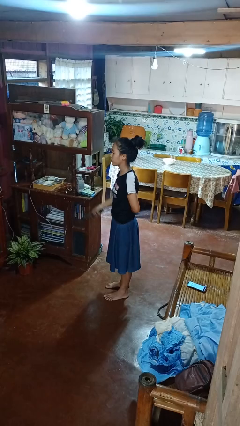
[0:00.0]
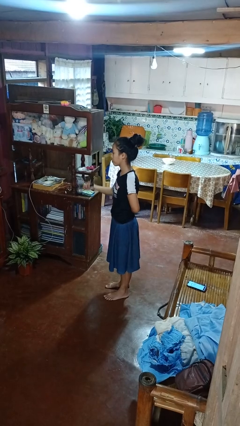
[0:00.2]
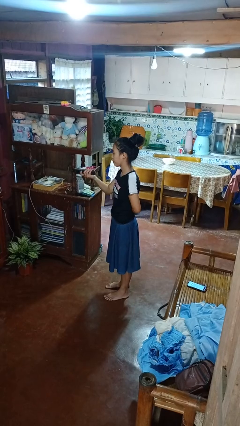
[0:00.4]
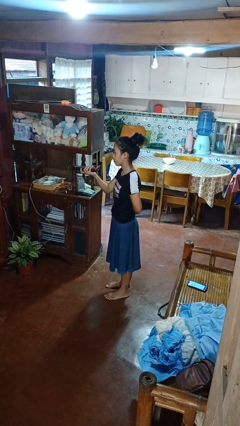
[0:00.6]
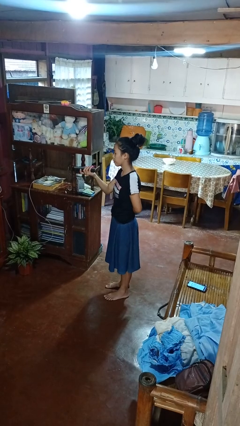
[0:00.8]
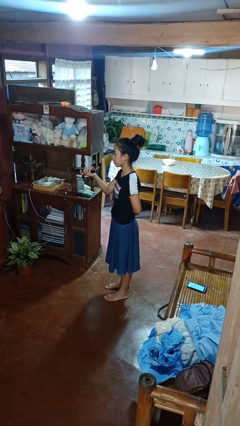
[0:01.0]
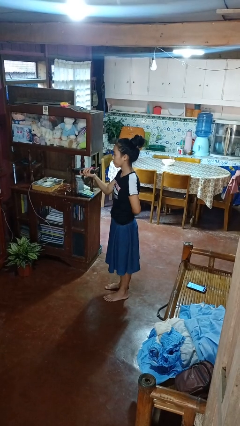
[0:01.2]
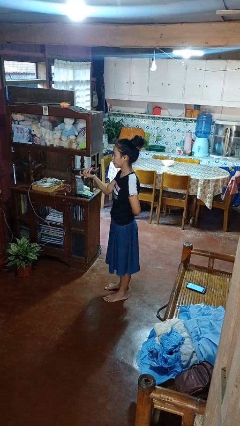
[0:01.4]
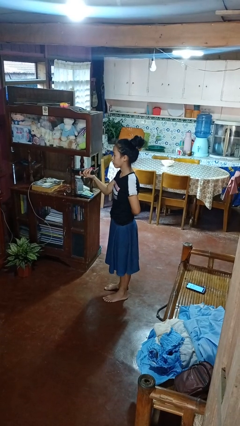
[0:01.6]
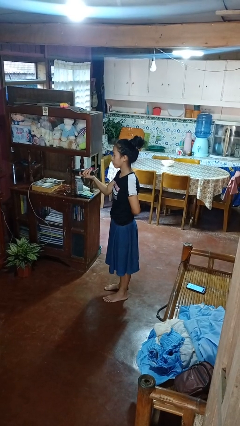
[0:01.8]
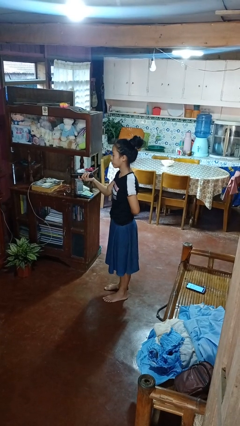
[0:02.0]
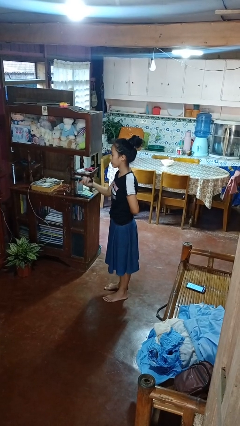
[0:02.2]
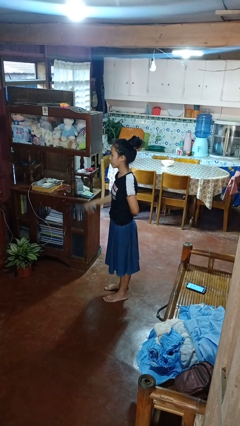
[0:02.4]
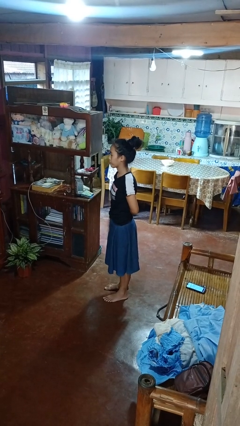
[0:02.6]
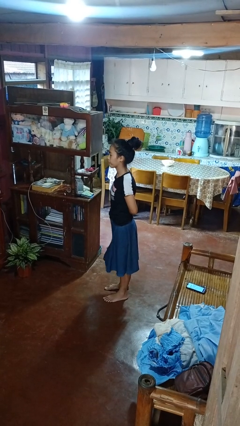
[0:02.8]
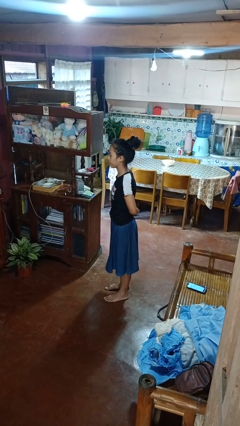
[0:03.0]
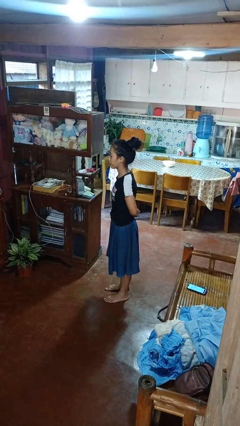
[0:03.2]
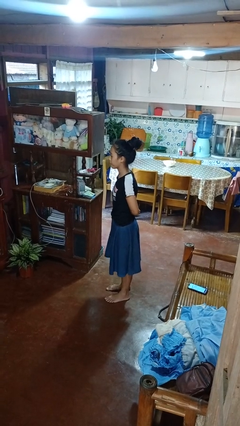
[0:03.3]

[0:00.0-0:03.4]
person uses television remote

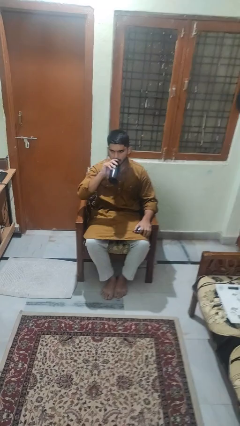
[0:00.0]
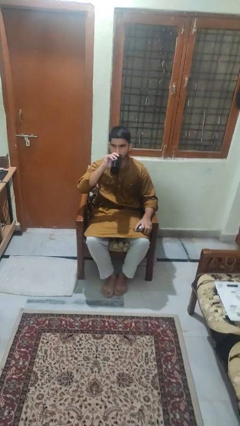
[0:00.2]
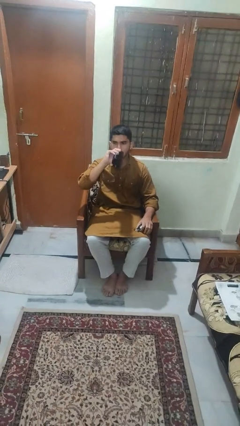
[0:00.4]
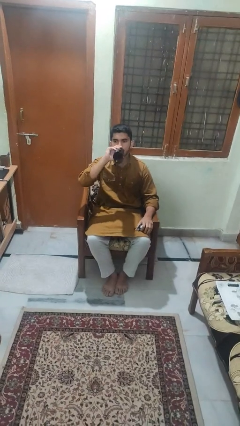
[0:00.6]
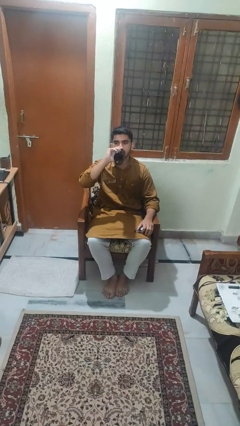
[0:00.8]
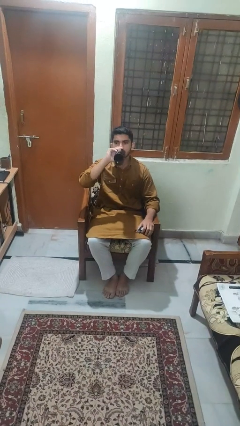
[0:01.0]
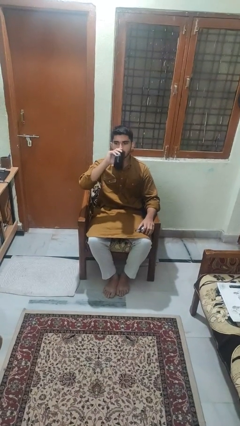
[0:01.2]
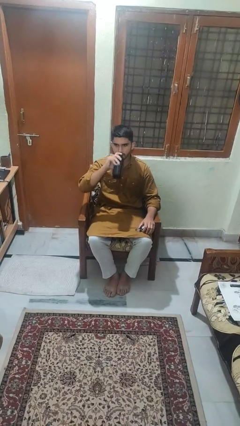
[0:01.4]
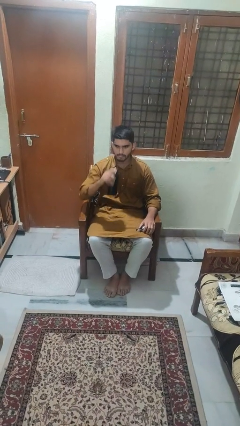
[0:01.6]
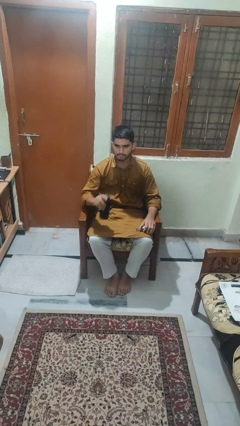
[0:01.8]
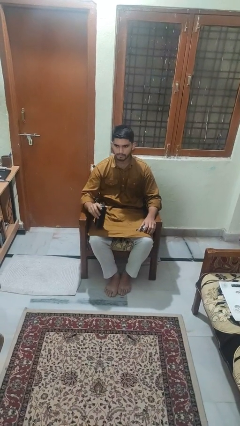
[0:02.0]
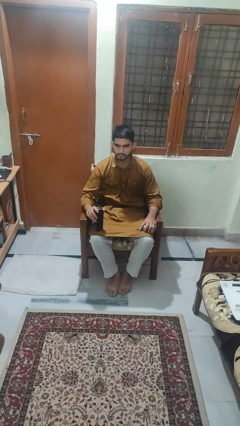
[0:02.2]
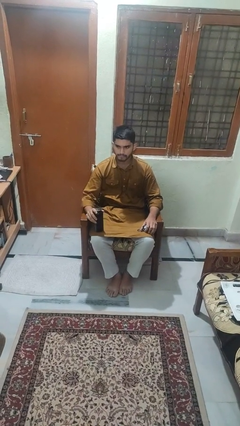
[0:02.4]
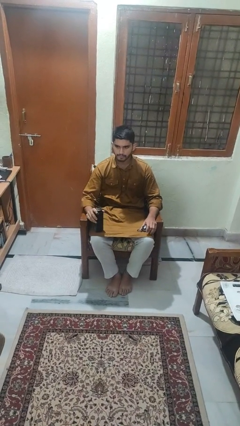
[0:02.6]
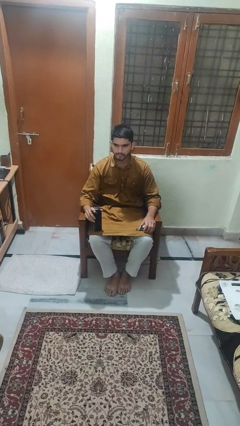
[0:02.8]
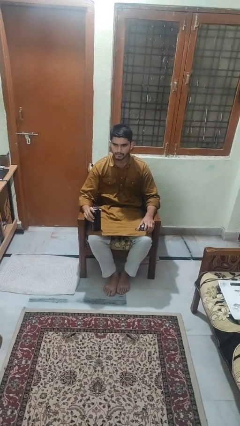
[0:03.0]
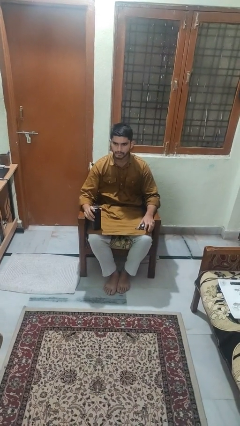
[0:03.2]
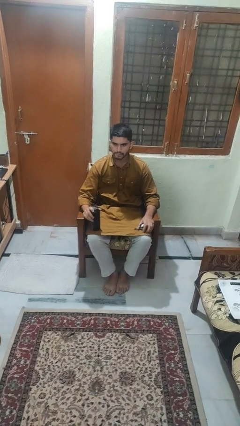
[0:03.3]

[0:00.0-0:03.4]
person drinks from bottle

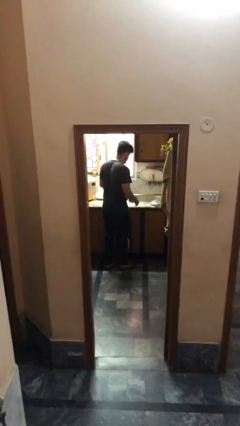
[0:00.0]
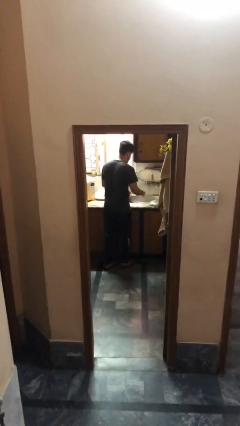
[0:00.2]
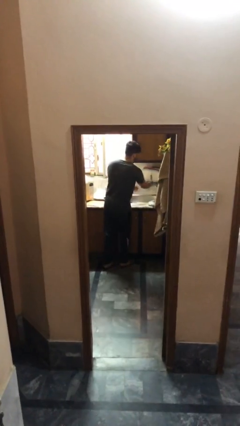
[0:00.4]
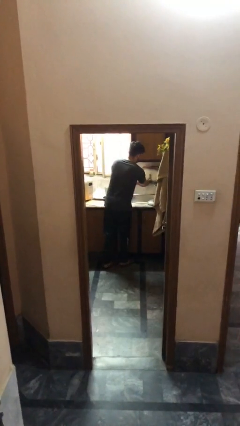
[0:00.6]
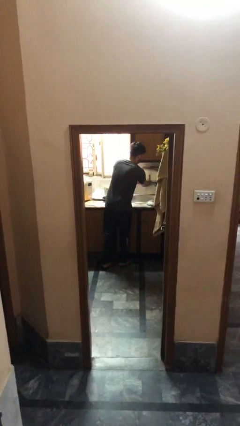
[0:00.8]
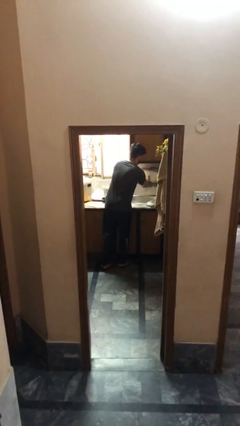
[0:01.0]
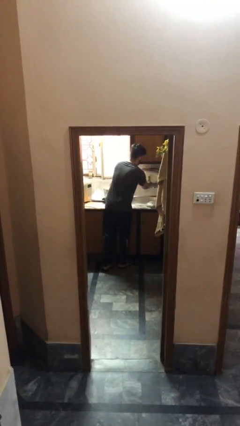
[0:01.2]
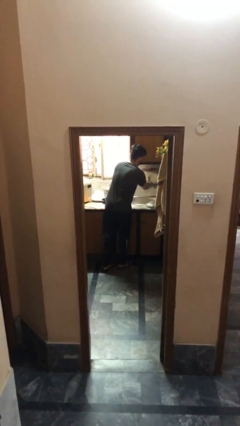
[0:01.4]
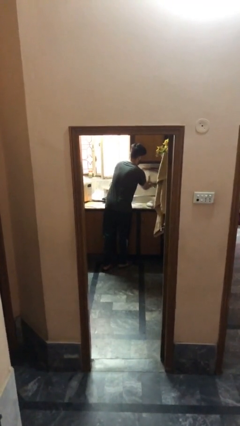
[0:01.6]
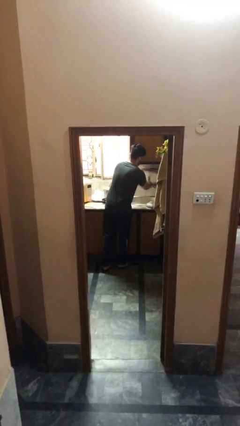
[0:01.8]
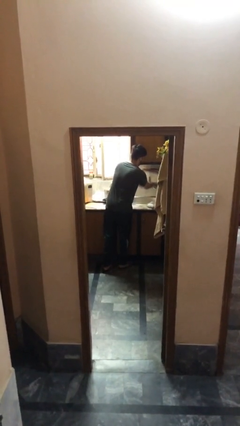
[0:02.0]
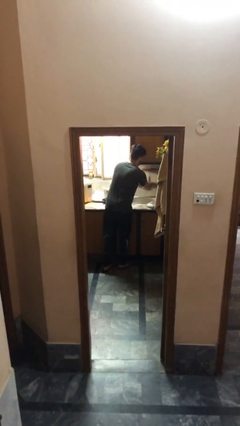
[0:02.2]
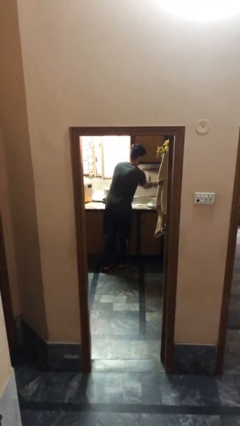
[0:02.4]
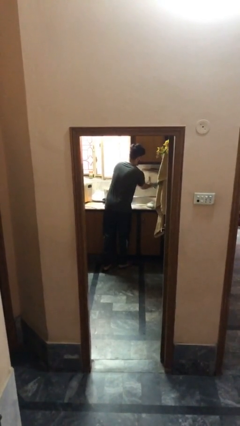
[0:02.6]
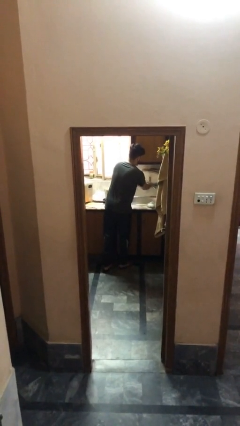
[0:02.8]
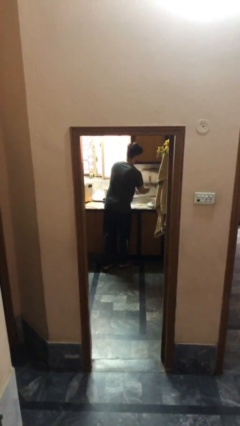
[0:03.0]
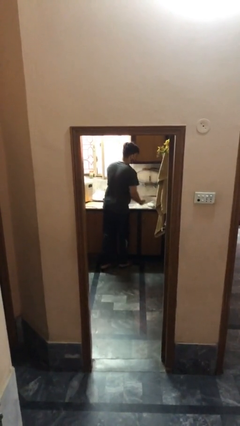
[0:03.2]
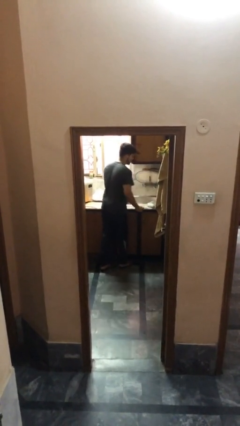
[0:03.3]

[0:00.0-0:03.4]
person washes hands

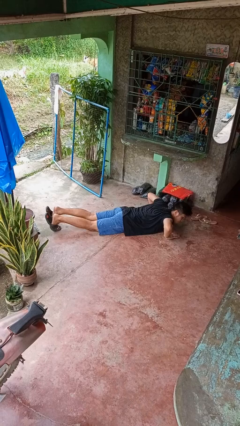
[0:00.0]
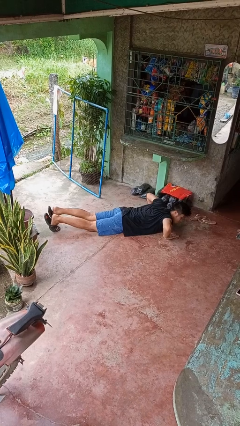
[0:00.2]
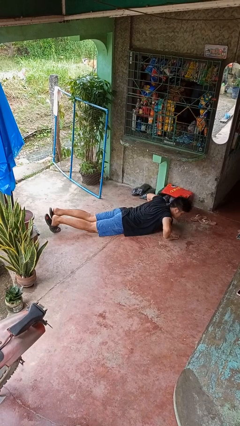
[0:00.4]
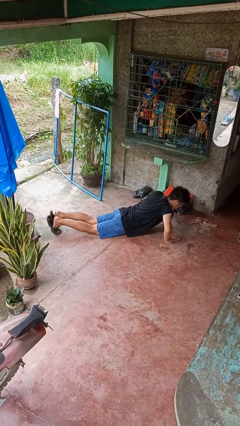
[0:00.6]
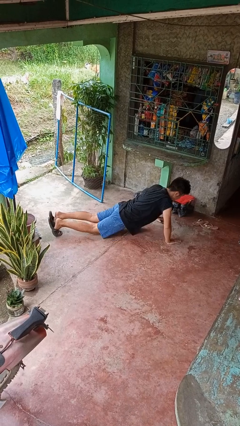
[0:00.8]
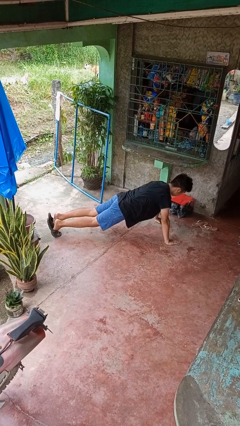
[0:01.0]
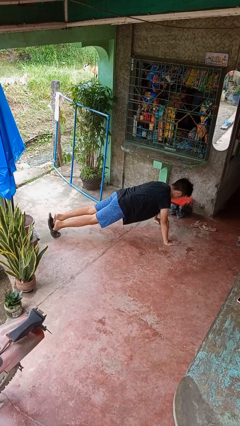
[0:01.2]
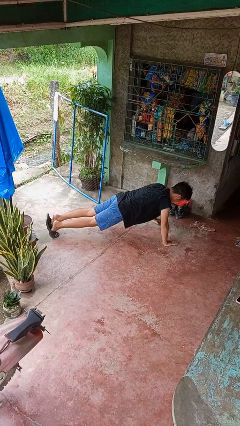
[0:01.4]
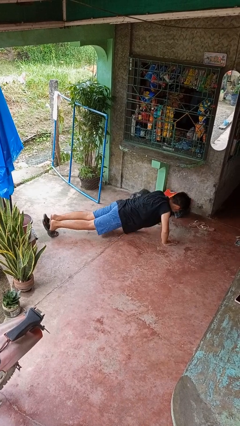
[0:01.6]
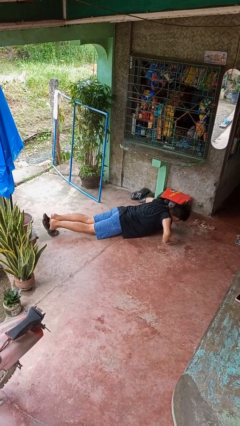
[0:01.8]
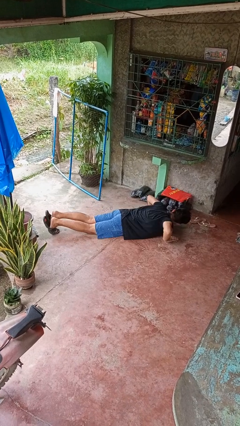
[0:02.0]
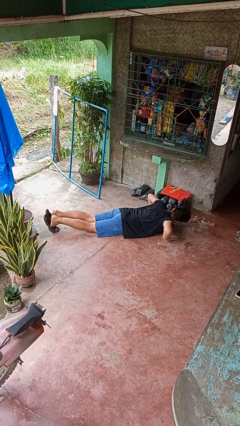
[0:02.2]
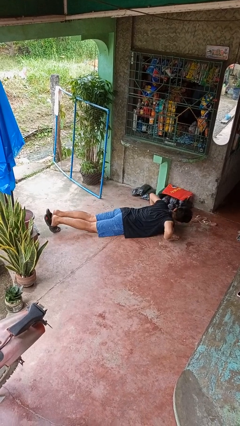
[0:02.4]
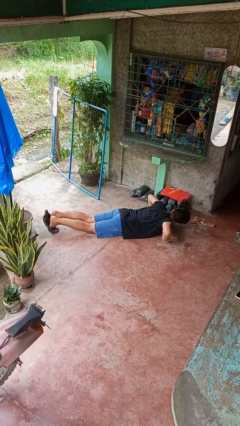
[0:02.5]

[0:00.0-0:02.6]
person exercises with pushup

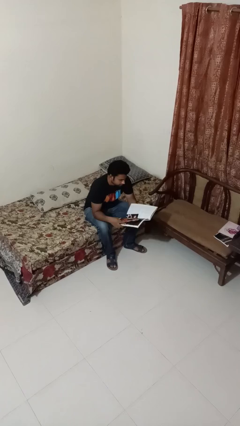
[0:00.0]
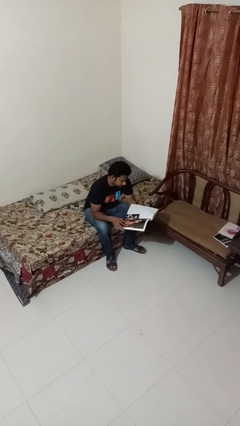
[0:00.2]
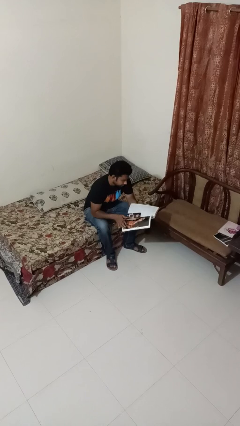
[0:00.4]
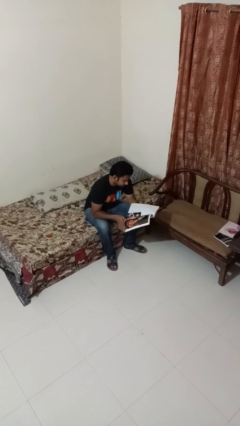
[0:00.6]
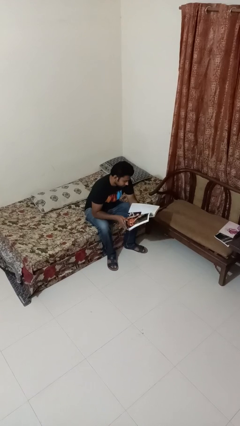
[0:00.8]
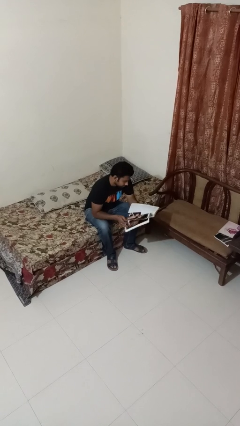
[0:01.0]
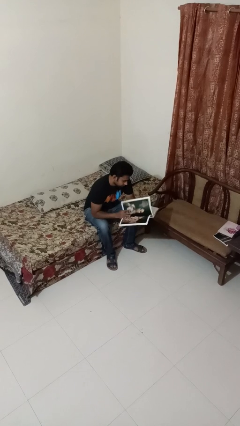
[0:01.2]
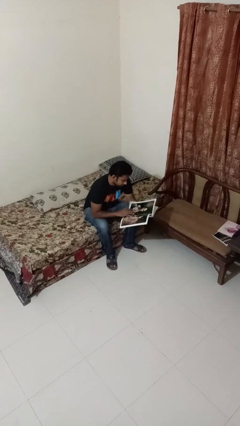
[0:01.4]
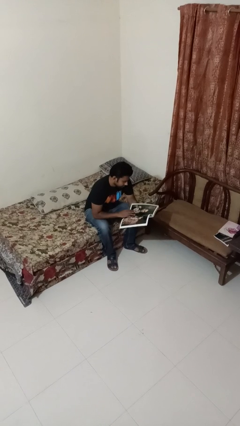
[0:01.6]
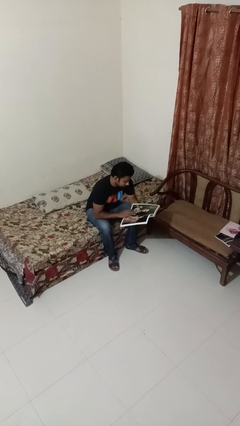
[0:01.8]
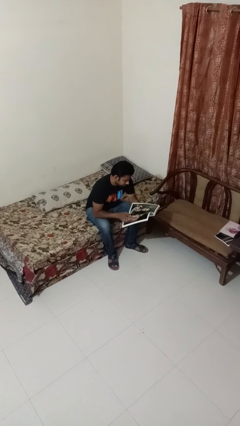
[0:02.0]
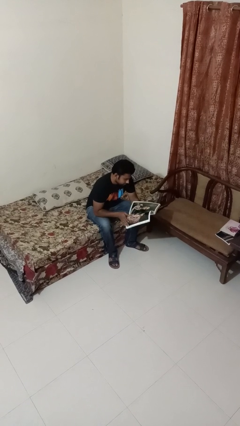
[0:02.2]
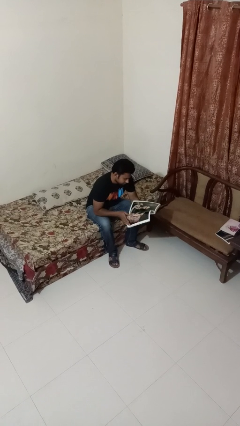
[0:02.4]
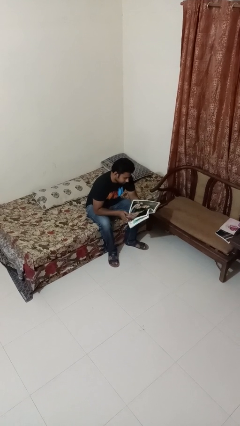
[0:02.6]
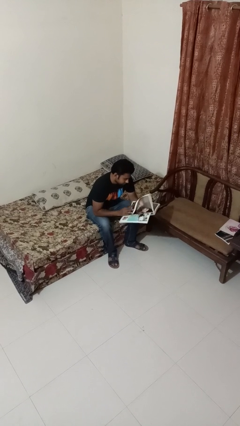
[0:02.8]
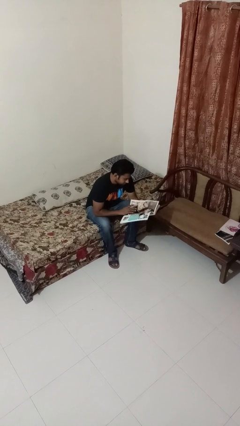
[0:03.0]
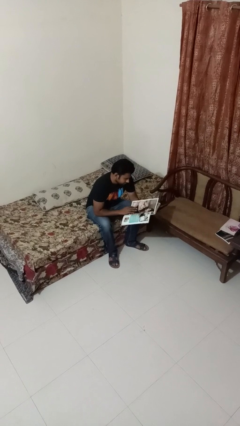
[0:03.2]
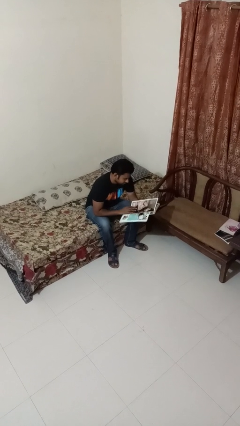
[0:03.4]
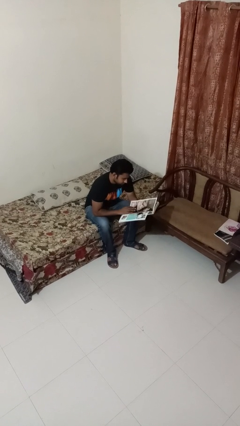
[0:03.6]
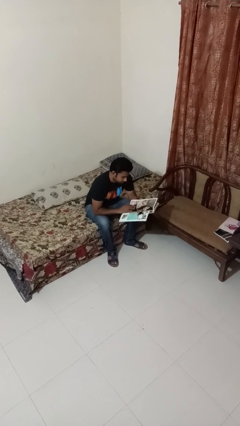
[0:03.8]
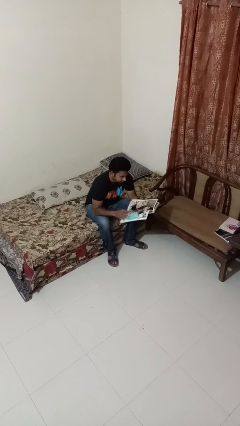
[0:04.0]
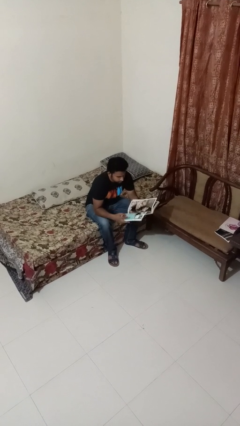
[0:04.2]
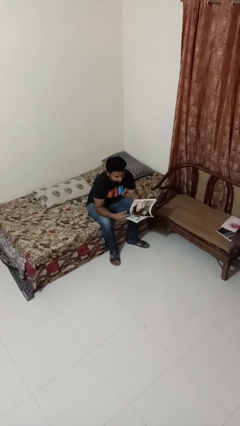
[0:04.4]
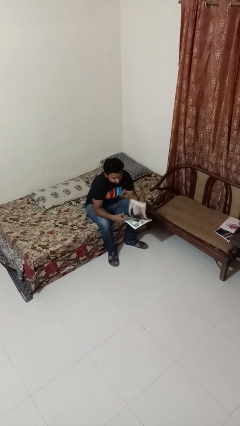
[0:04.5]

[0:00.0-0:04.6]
person reads magazine

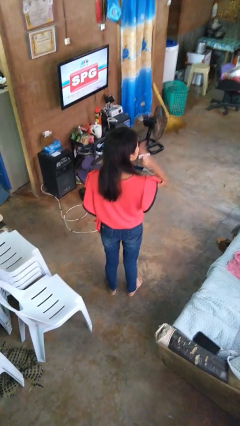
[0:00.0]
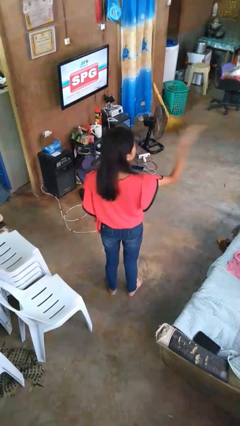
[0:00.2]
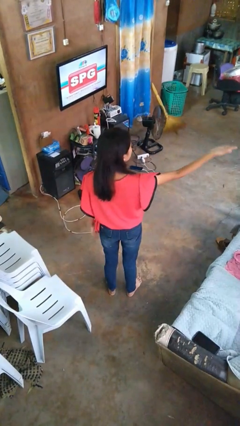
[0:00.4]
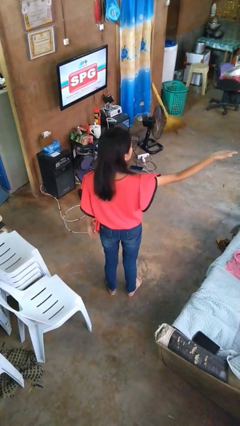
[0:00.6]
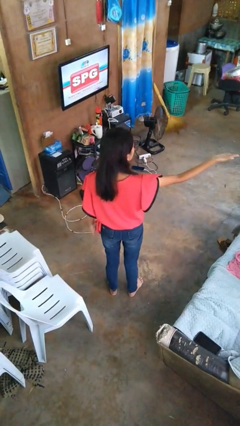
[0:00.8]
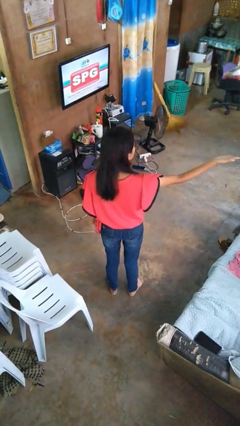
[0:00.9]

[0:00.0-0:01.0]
person gestures blow kiss
